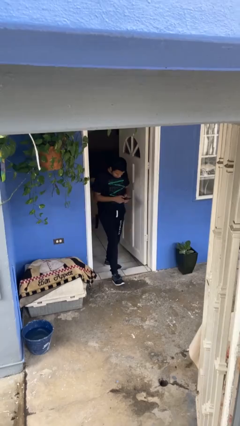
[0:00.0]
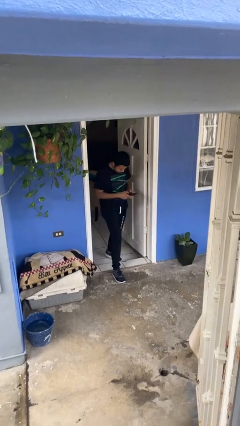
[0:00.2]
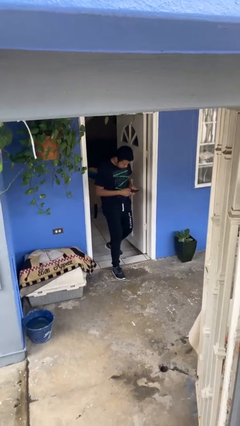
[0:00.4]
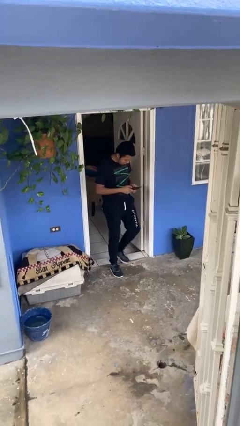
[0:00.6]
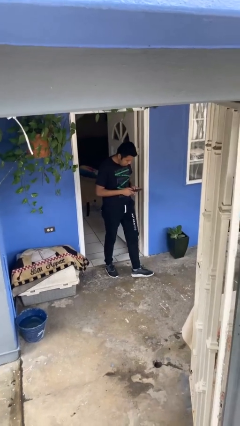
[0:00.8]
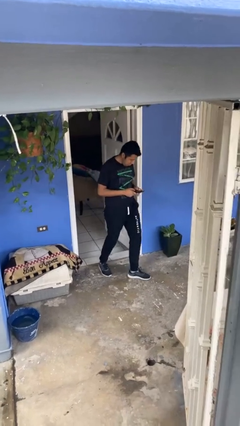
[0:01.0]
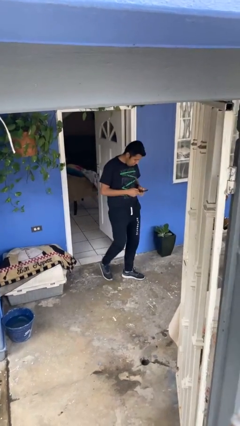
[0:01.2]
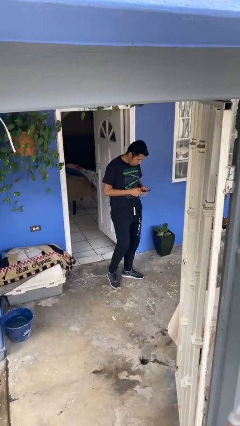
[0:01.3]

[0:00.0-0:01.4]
person enters scene through structure

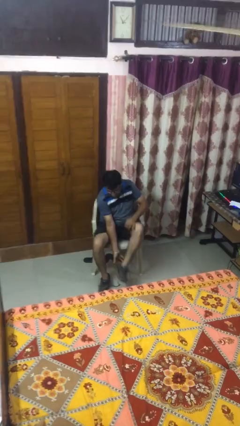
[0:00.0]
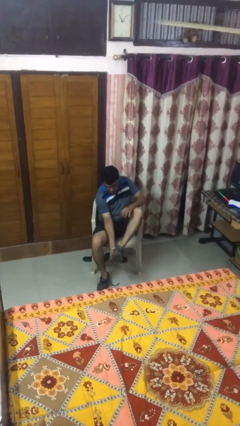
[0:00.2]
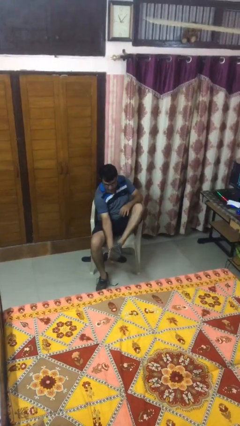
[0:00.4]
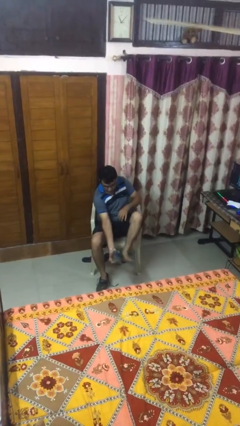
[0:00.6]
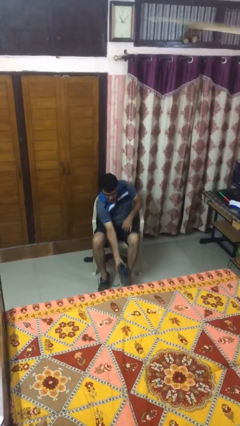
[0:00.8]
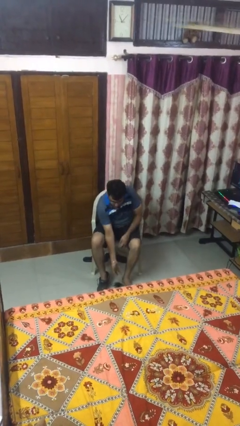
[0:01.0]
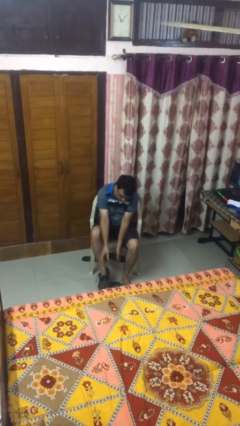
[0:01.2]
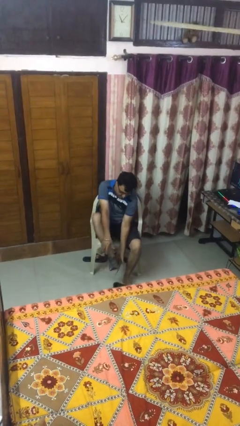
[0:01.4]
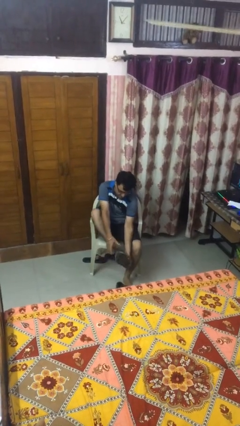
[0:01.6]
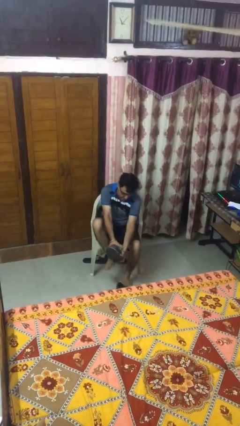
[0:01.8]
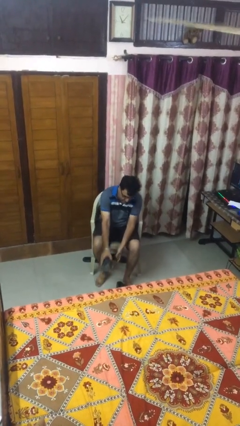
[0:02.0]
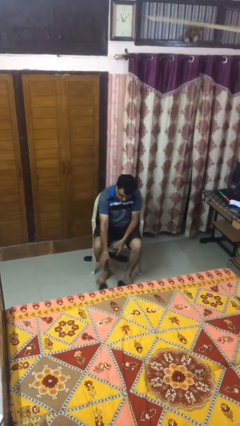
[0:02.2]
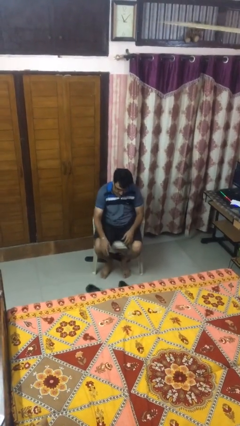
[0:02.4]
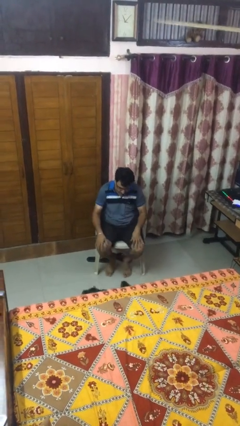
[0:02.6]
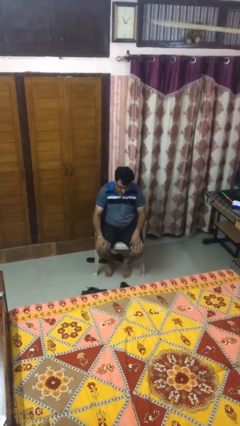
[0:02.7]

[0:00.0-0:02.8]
person takes off shoes

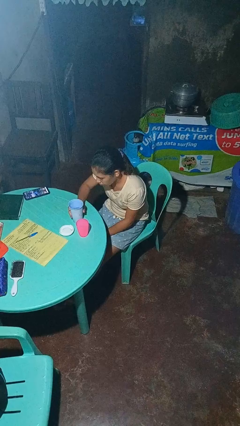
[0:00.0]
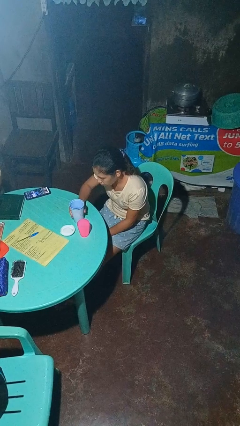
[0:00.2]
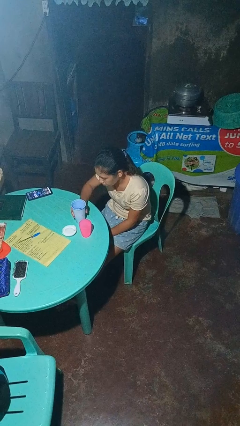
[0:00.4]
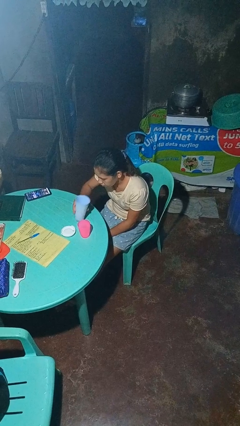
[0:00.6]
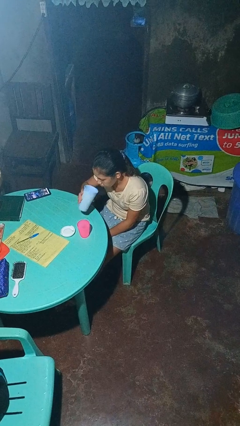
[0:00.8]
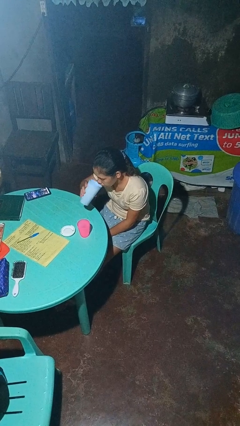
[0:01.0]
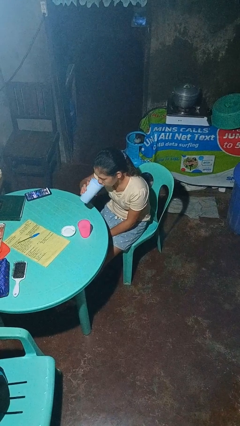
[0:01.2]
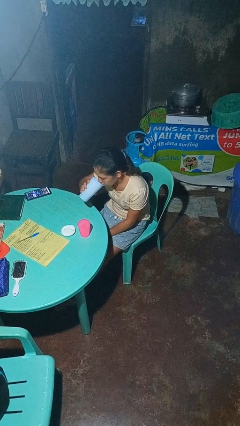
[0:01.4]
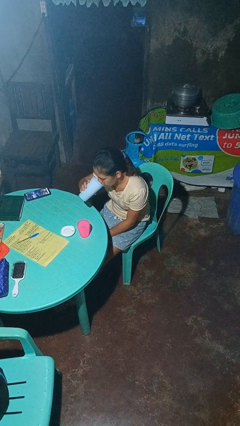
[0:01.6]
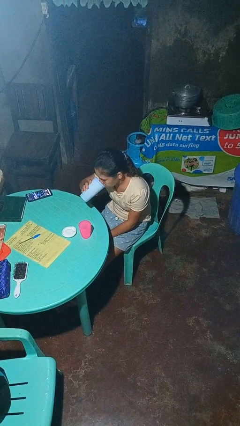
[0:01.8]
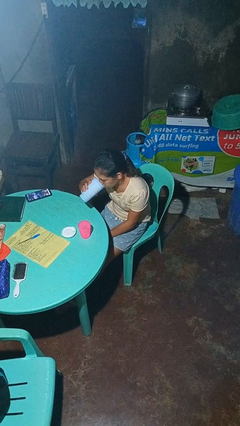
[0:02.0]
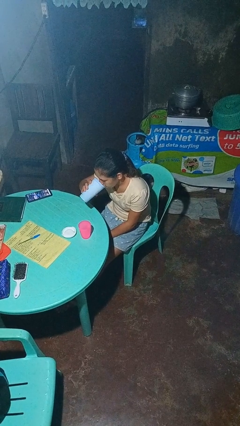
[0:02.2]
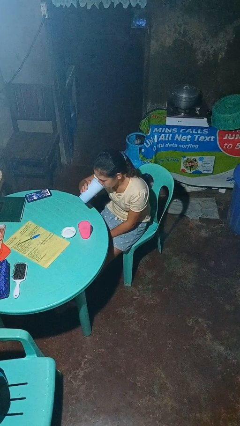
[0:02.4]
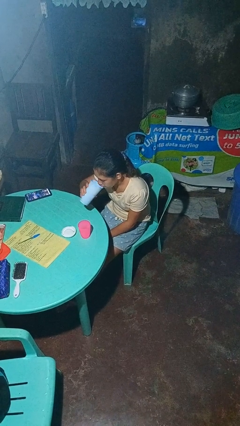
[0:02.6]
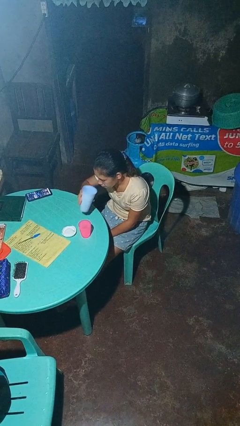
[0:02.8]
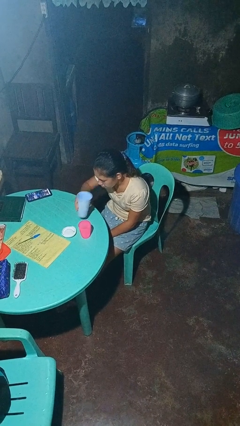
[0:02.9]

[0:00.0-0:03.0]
person drinks from bottle

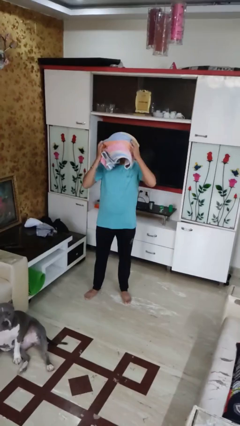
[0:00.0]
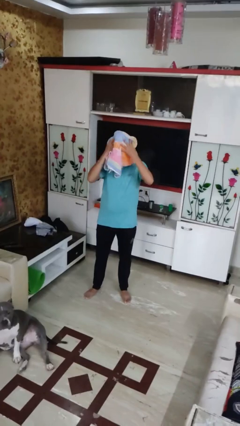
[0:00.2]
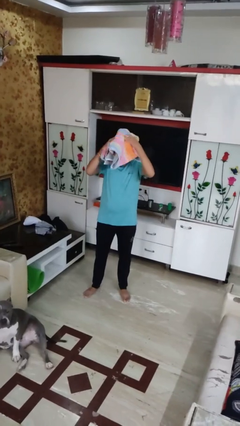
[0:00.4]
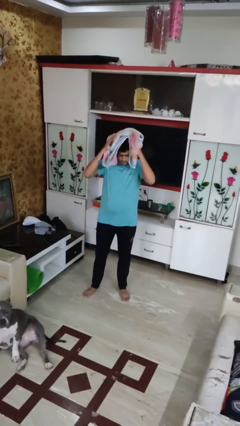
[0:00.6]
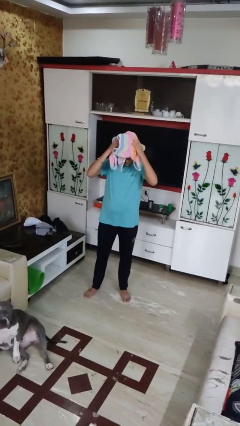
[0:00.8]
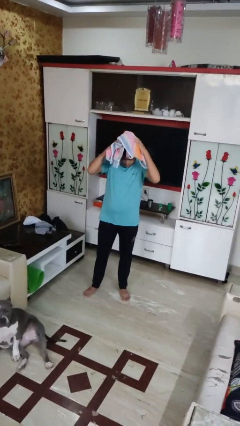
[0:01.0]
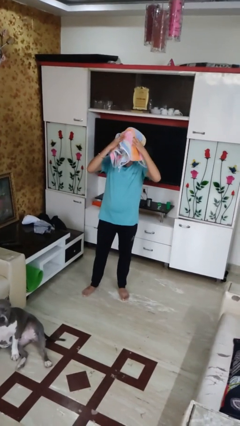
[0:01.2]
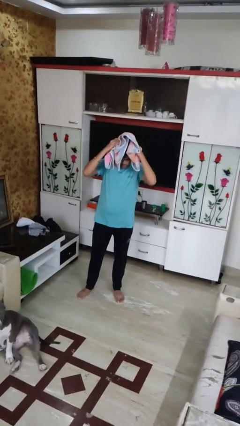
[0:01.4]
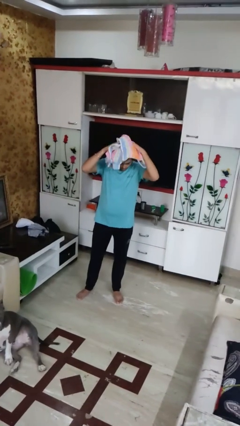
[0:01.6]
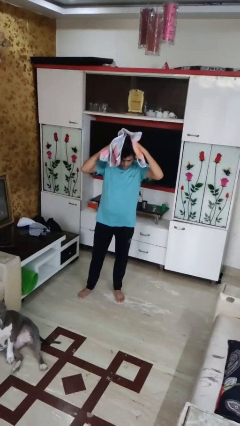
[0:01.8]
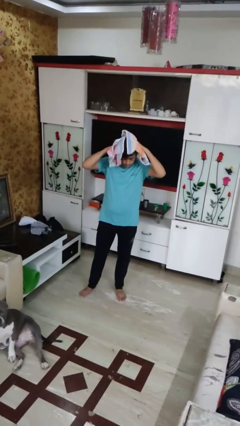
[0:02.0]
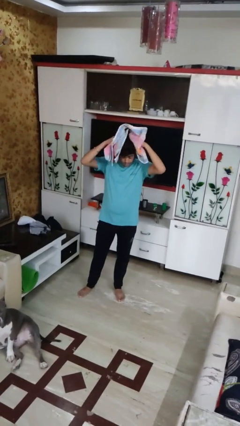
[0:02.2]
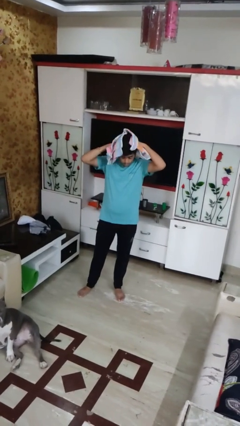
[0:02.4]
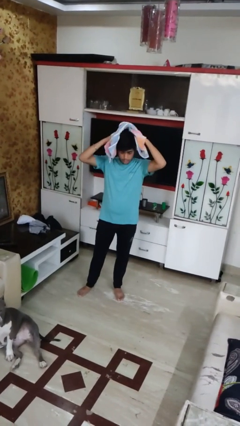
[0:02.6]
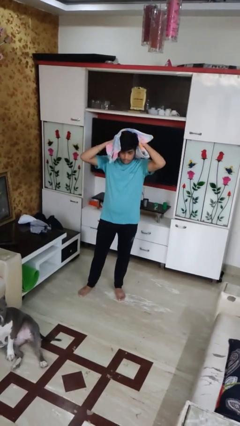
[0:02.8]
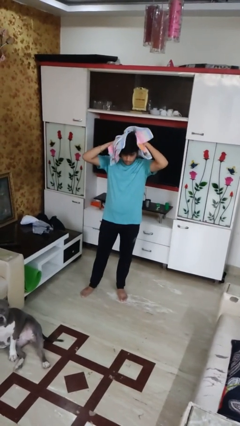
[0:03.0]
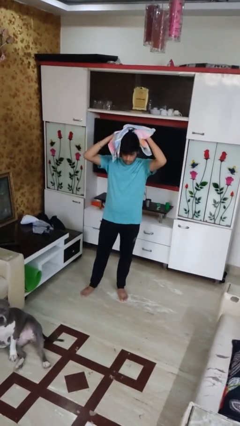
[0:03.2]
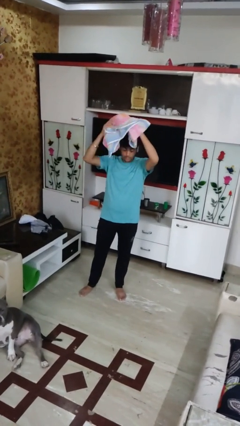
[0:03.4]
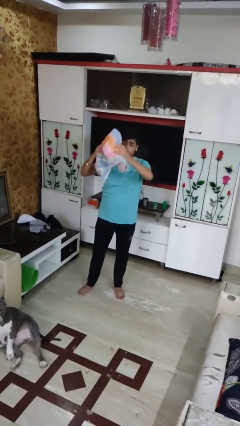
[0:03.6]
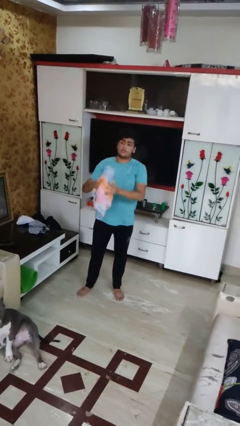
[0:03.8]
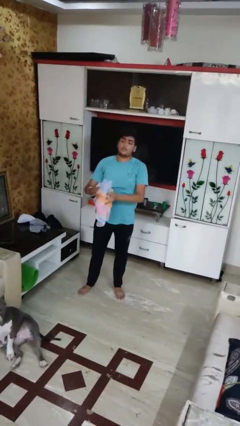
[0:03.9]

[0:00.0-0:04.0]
person dries hair with towel

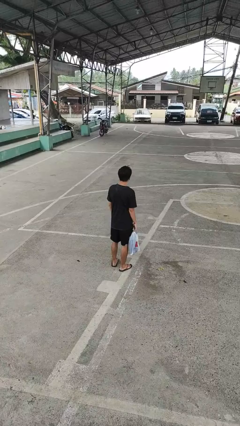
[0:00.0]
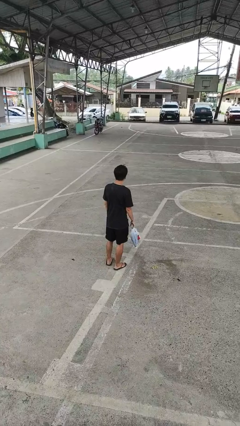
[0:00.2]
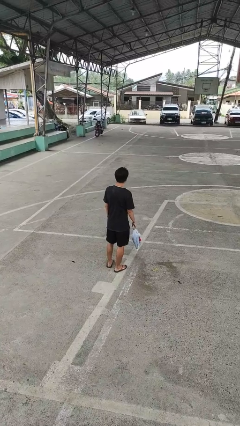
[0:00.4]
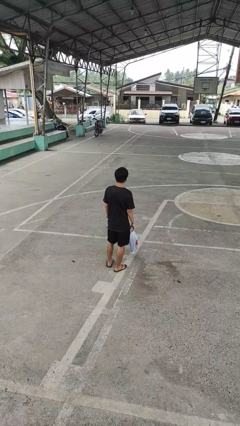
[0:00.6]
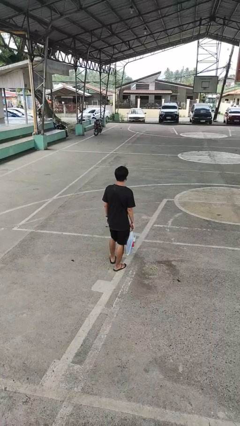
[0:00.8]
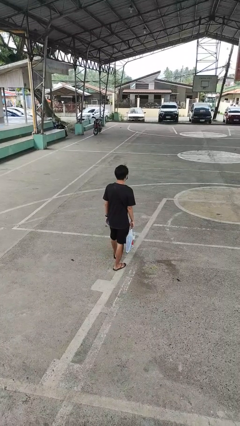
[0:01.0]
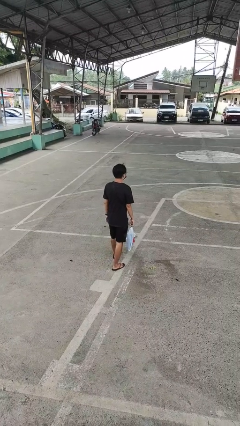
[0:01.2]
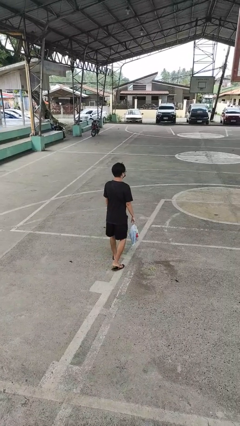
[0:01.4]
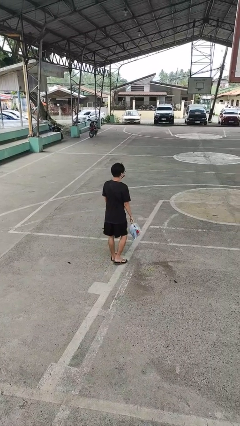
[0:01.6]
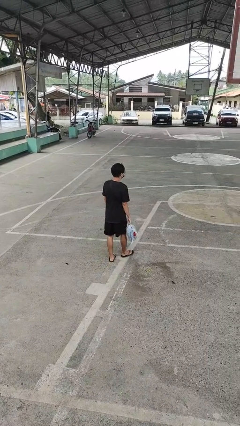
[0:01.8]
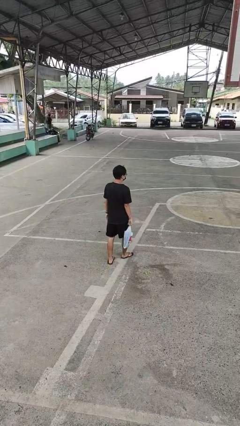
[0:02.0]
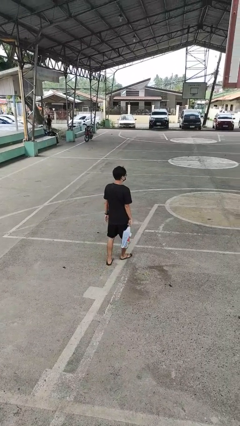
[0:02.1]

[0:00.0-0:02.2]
person carries groceries

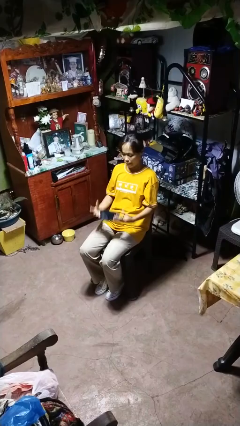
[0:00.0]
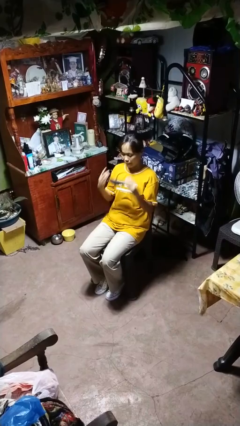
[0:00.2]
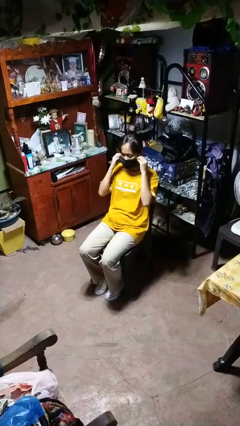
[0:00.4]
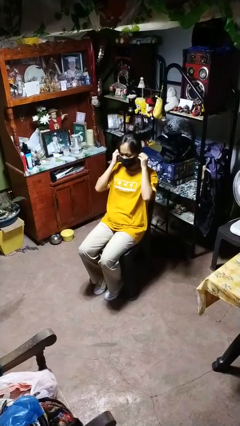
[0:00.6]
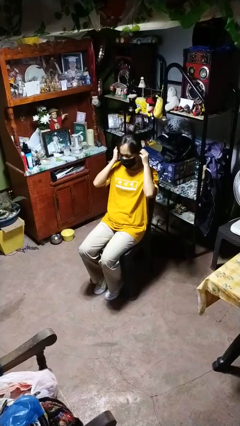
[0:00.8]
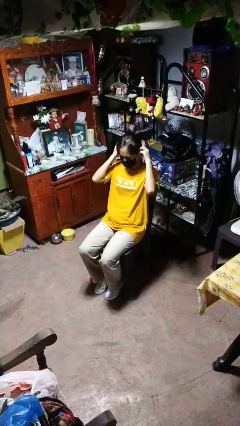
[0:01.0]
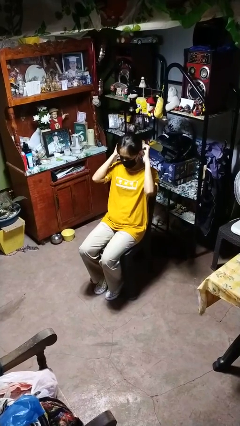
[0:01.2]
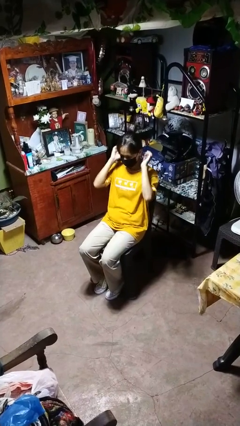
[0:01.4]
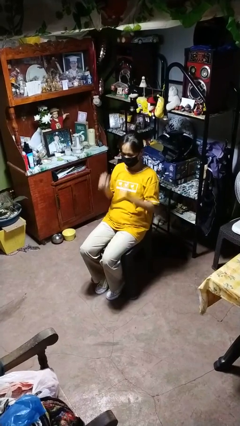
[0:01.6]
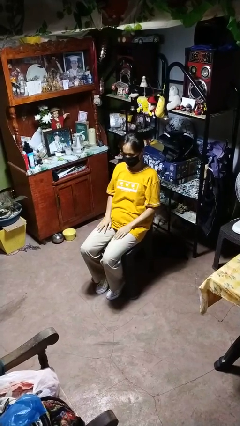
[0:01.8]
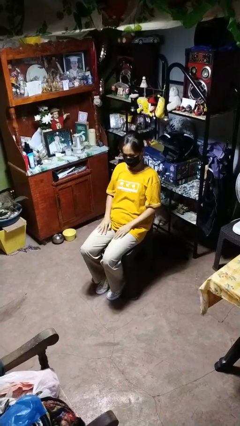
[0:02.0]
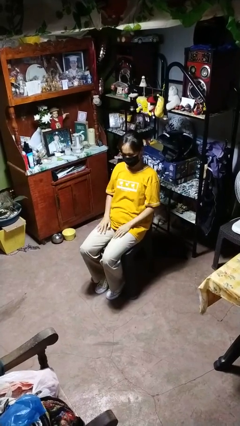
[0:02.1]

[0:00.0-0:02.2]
person puts on facemask

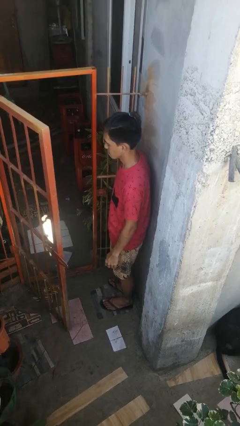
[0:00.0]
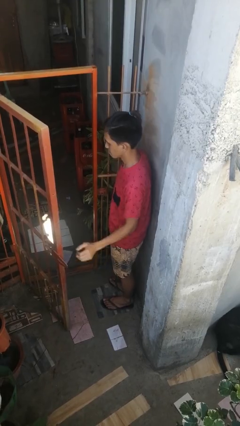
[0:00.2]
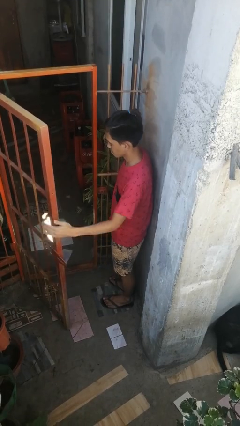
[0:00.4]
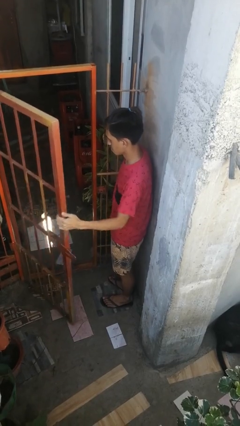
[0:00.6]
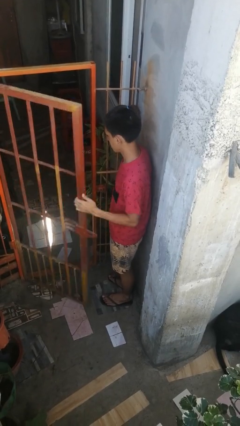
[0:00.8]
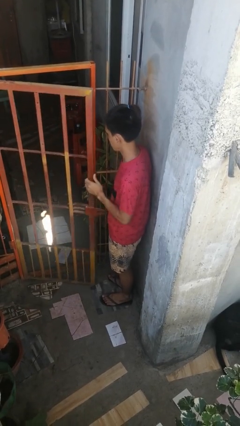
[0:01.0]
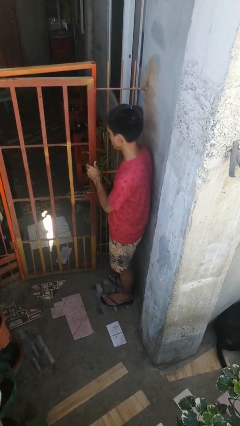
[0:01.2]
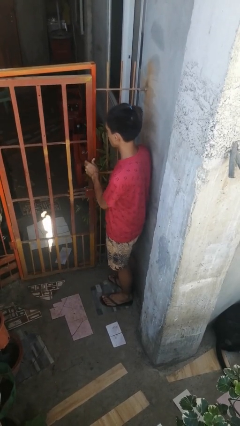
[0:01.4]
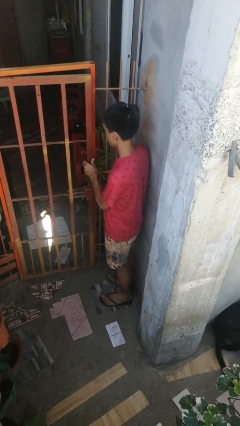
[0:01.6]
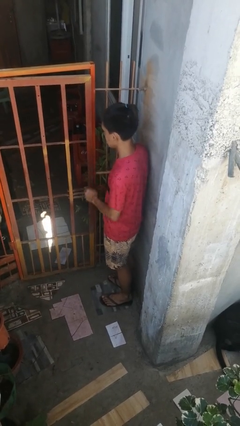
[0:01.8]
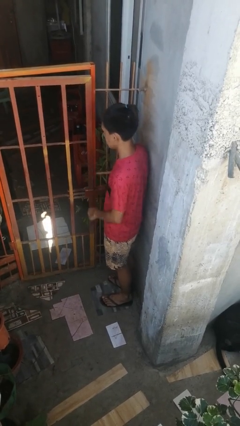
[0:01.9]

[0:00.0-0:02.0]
person closes gate
